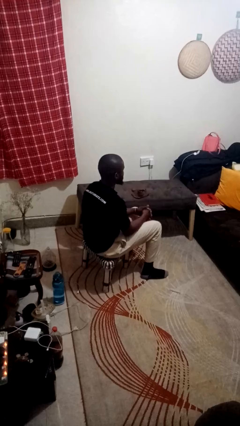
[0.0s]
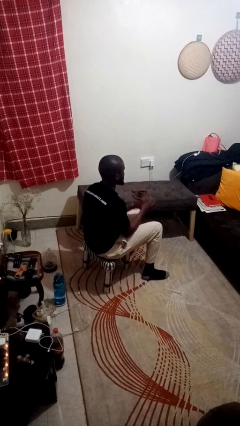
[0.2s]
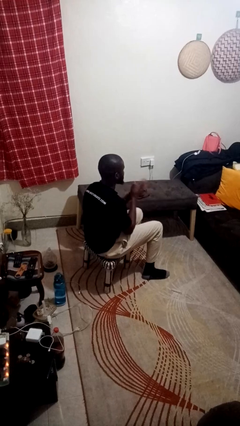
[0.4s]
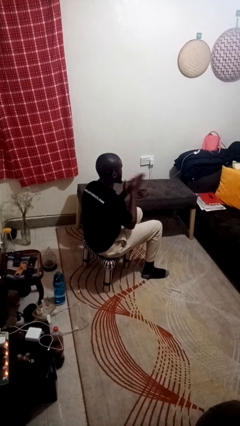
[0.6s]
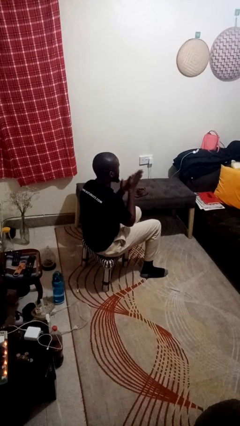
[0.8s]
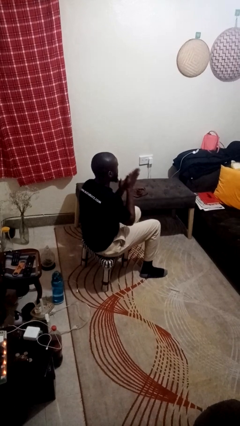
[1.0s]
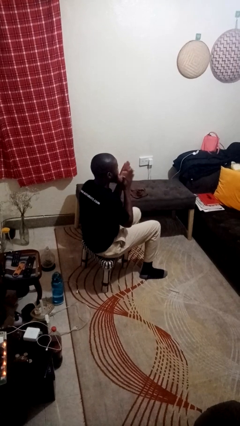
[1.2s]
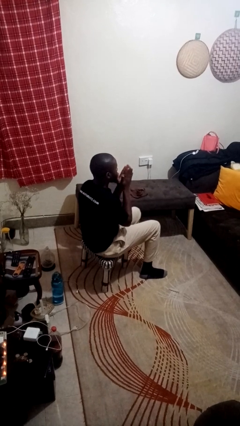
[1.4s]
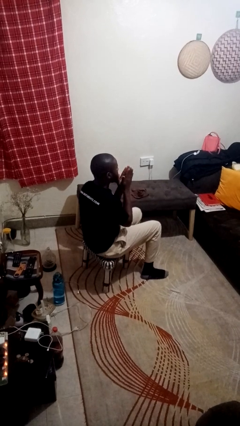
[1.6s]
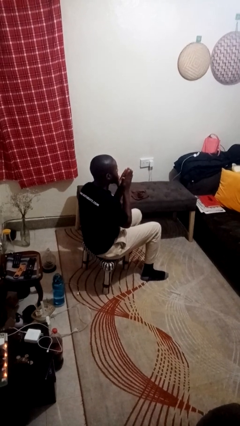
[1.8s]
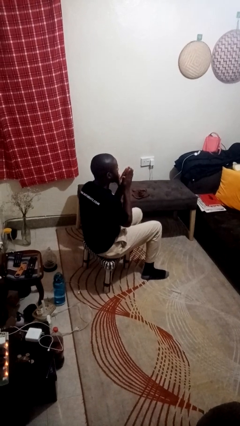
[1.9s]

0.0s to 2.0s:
person blows into hands

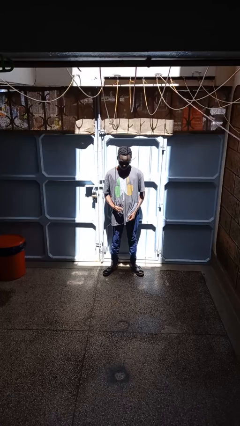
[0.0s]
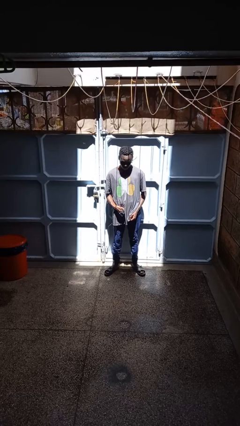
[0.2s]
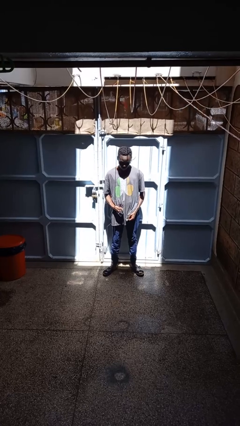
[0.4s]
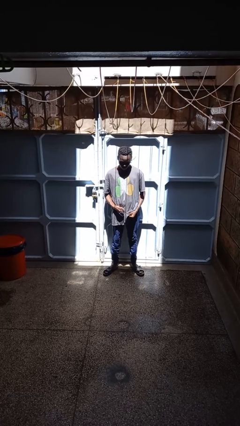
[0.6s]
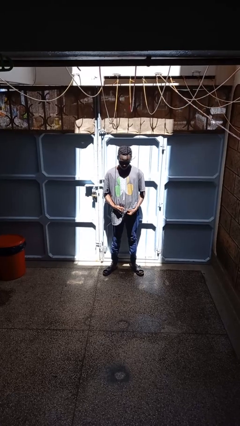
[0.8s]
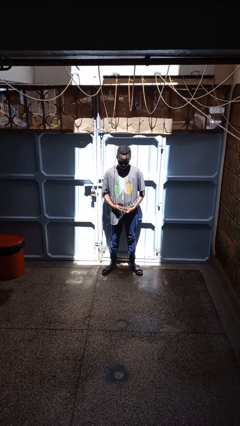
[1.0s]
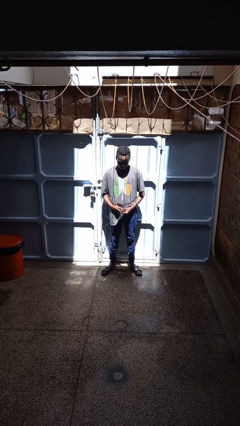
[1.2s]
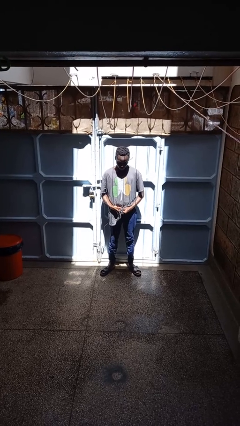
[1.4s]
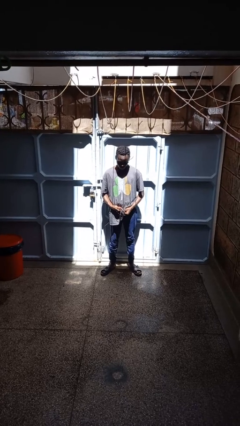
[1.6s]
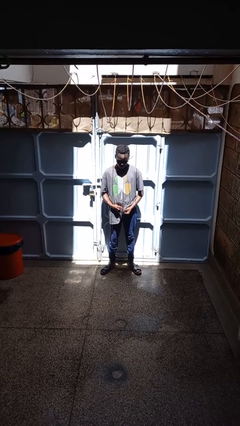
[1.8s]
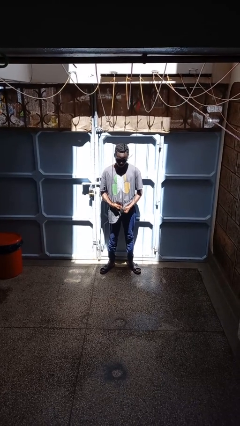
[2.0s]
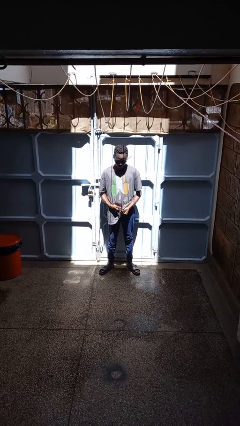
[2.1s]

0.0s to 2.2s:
person cleans eyeglasses

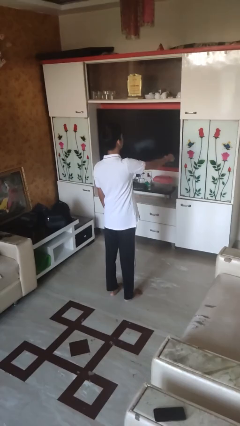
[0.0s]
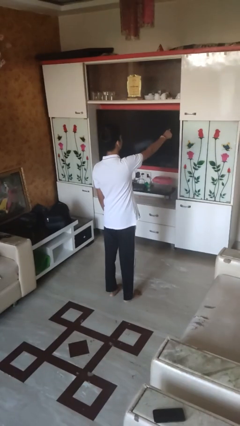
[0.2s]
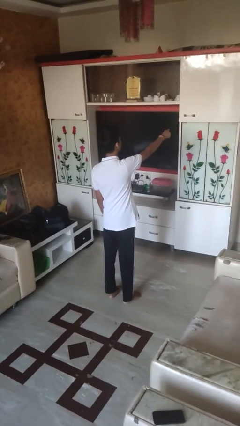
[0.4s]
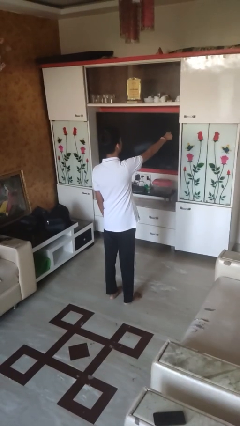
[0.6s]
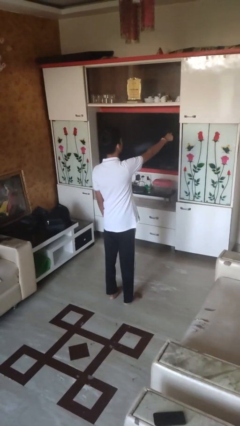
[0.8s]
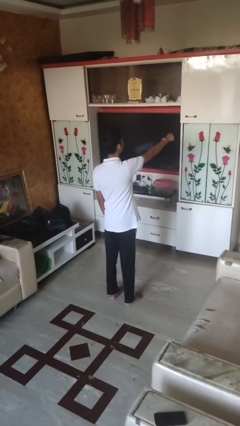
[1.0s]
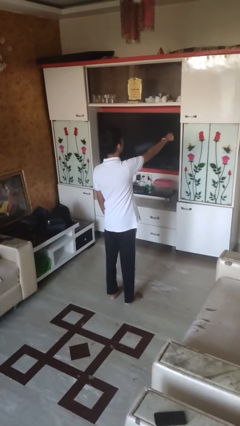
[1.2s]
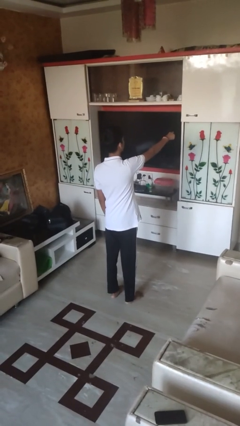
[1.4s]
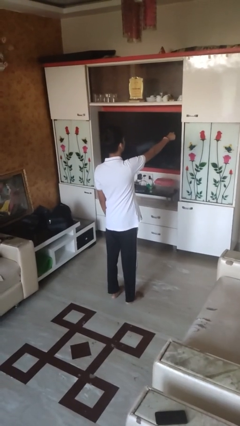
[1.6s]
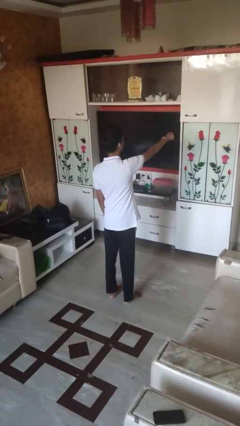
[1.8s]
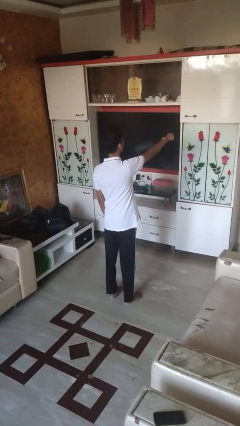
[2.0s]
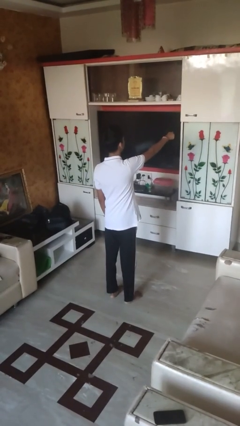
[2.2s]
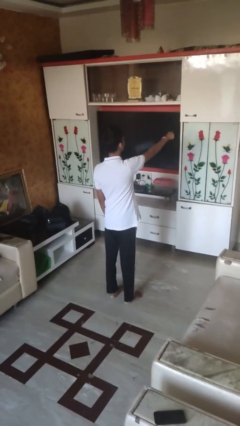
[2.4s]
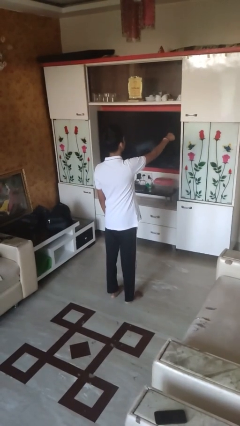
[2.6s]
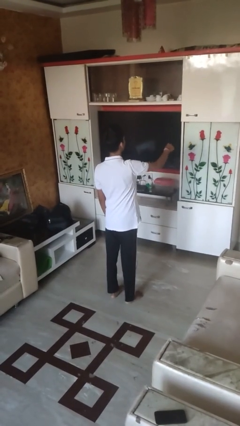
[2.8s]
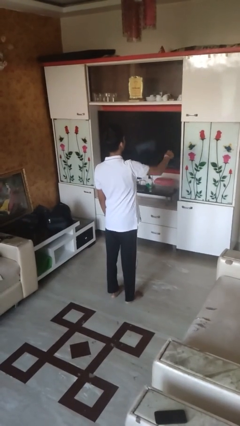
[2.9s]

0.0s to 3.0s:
person points at person

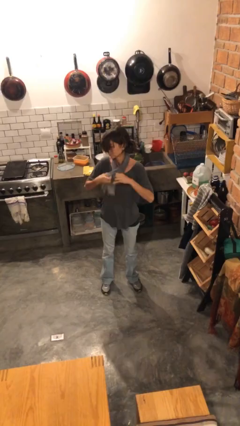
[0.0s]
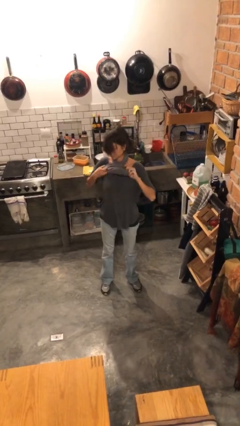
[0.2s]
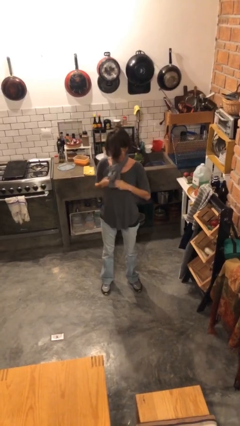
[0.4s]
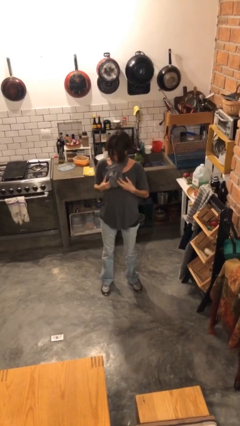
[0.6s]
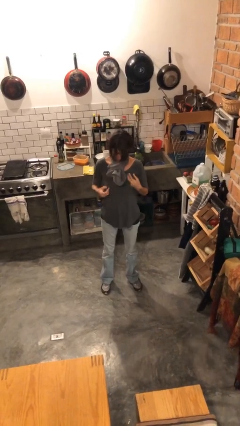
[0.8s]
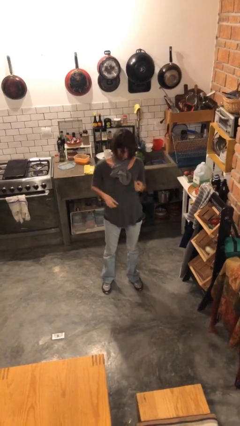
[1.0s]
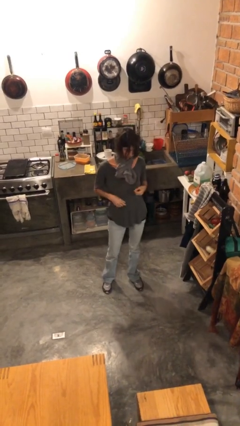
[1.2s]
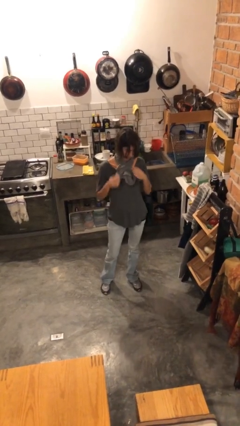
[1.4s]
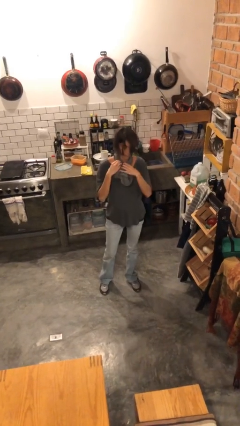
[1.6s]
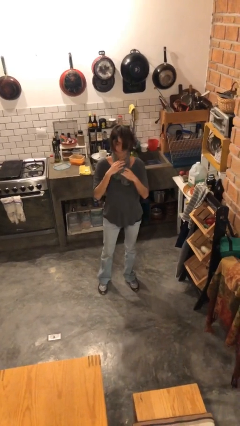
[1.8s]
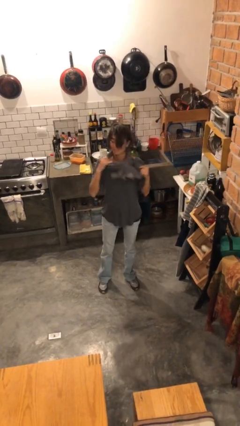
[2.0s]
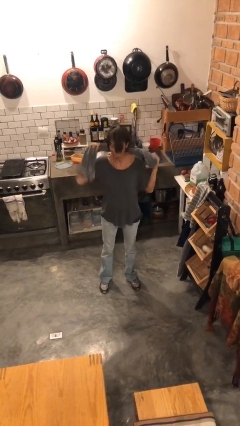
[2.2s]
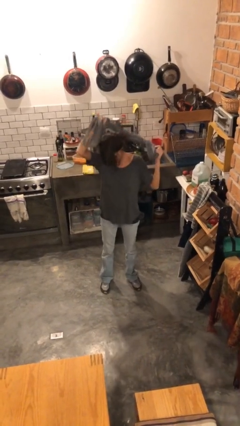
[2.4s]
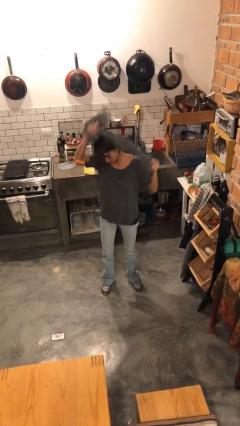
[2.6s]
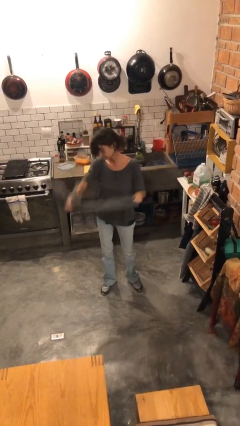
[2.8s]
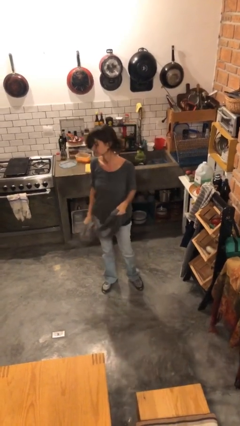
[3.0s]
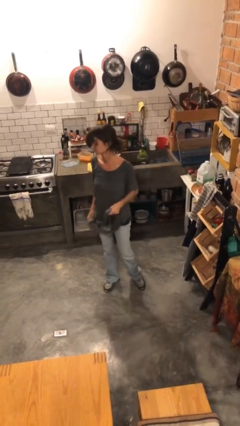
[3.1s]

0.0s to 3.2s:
person takes off scarf

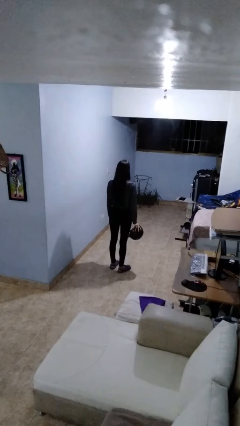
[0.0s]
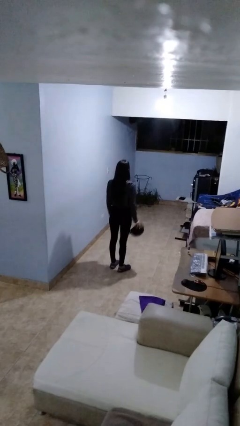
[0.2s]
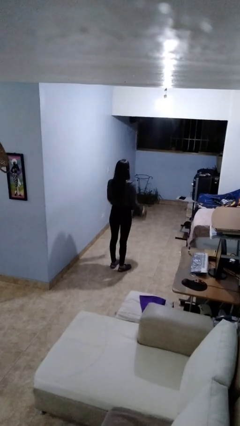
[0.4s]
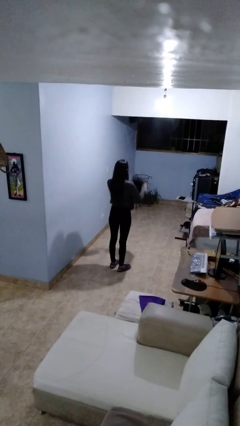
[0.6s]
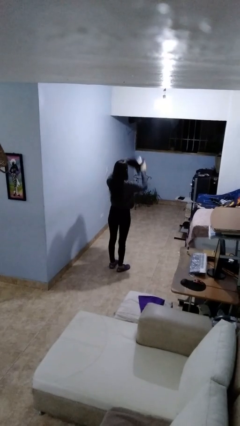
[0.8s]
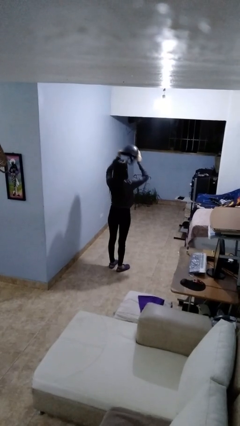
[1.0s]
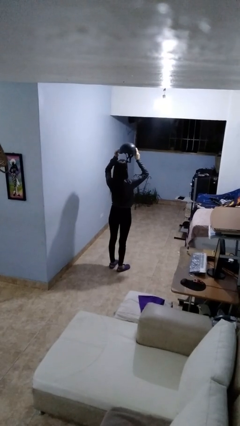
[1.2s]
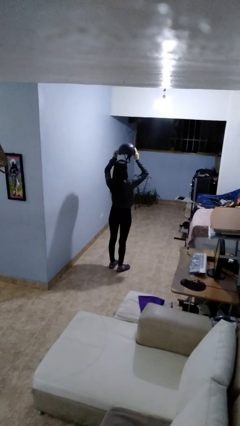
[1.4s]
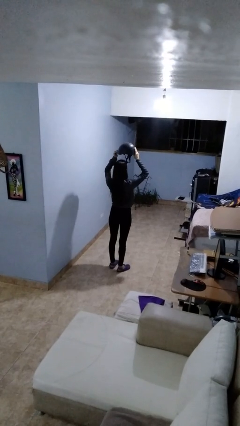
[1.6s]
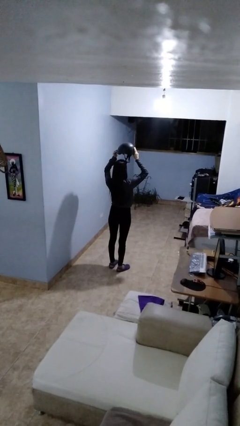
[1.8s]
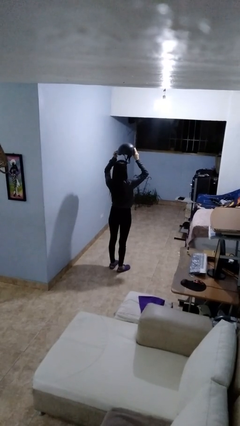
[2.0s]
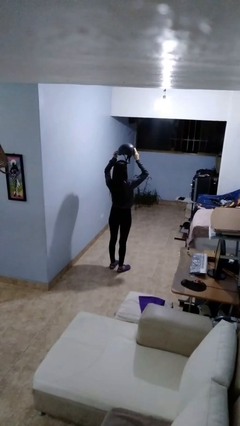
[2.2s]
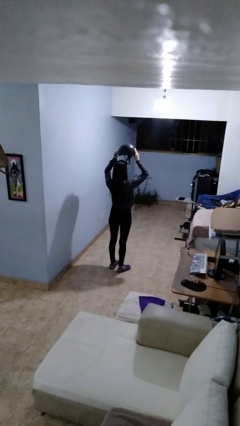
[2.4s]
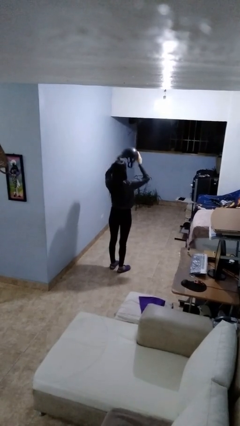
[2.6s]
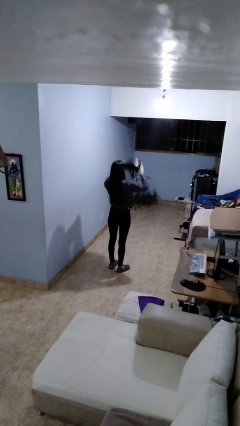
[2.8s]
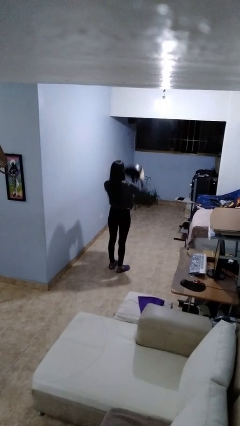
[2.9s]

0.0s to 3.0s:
person holds object above head

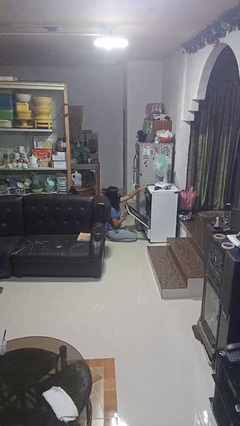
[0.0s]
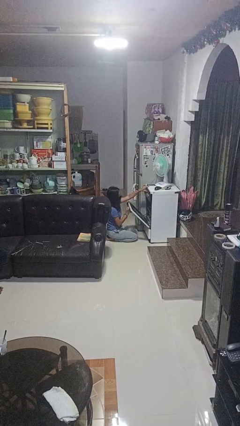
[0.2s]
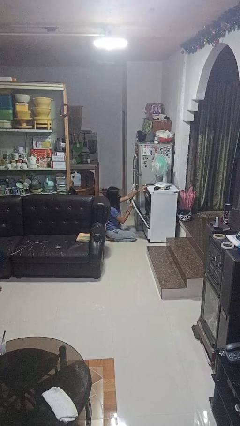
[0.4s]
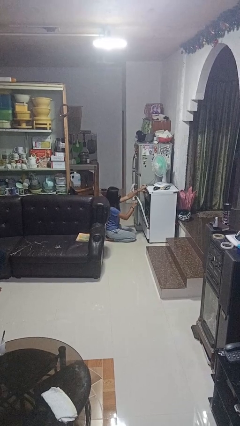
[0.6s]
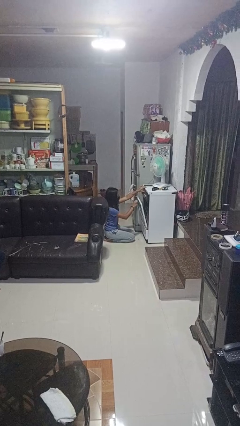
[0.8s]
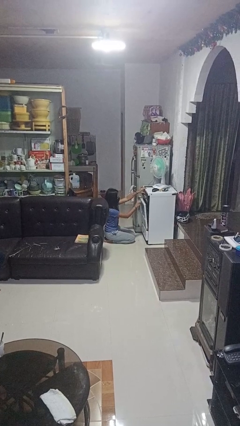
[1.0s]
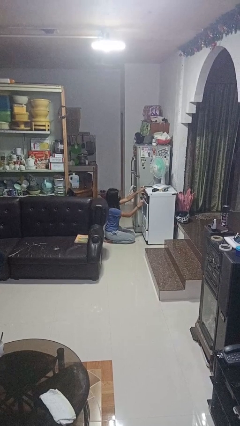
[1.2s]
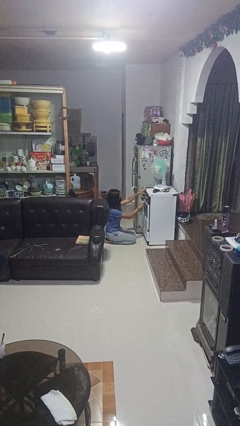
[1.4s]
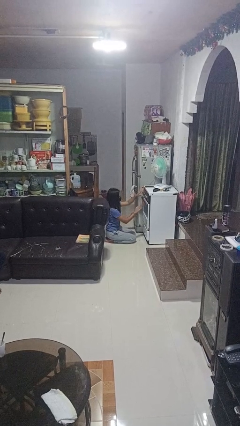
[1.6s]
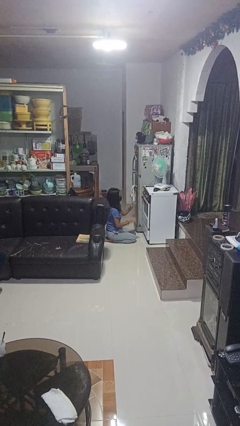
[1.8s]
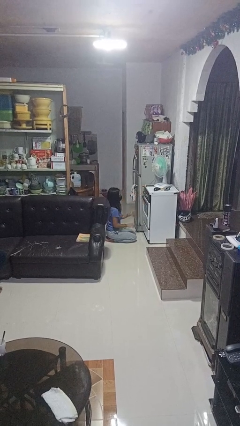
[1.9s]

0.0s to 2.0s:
person closes oven door

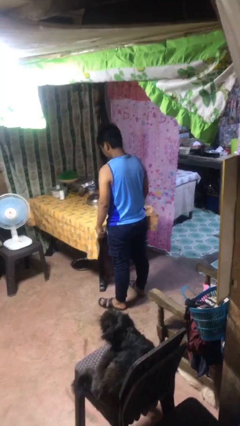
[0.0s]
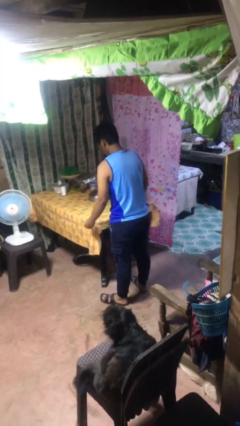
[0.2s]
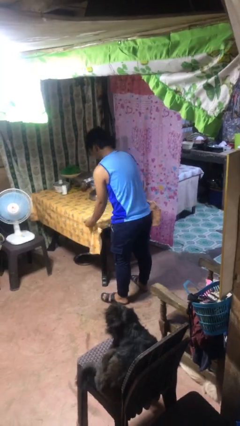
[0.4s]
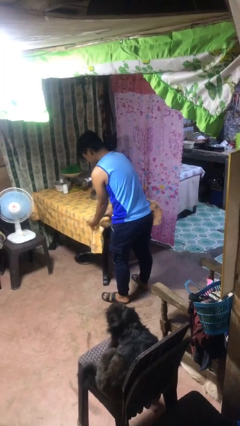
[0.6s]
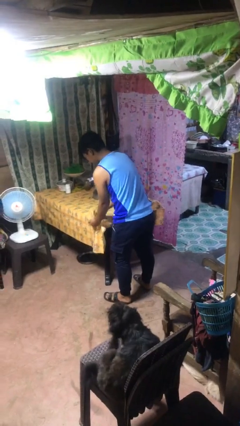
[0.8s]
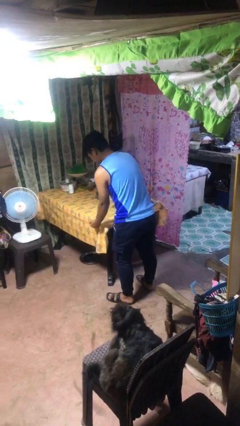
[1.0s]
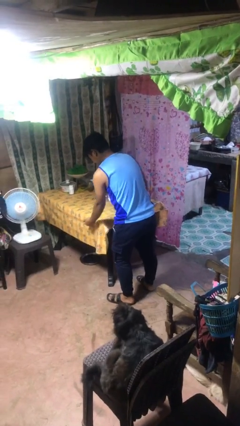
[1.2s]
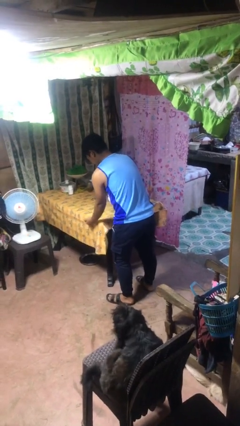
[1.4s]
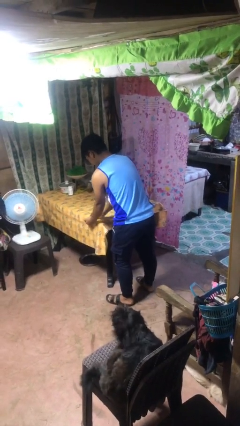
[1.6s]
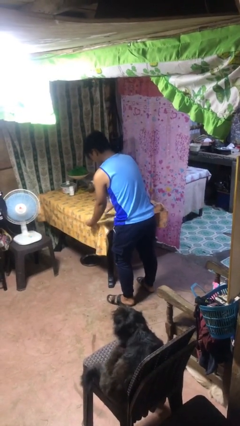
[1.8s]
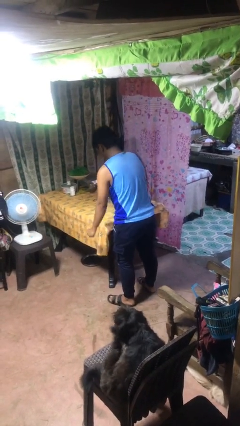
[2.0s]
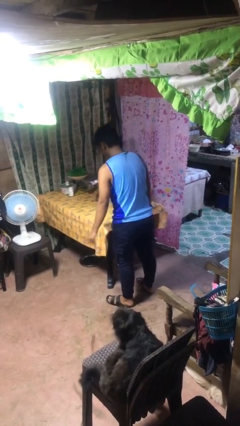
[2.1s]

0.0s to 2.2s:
person cleans table with rag
